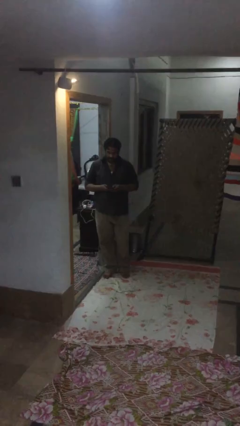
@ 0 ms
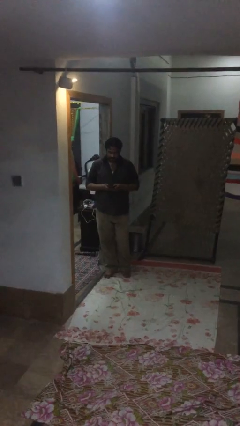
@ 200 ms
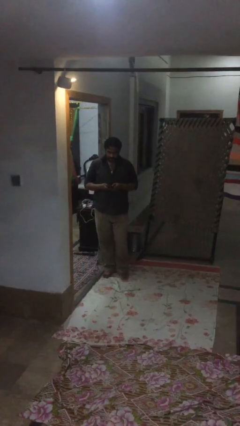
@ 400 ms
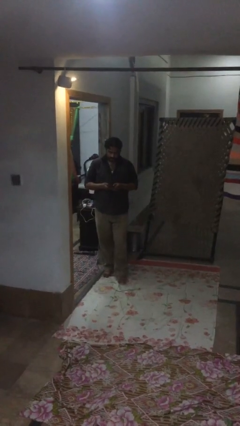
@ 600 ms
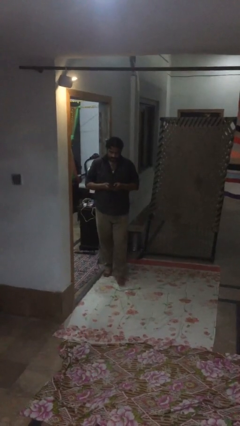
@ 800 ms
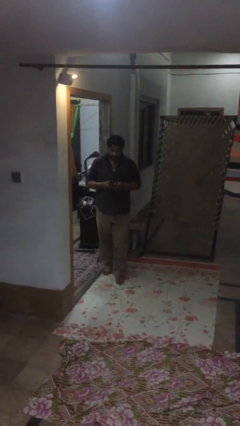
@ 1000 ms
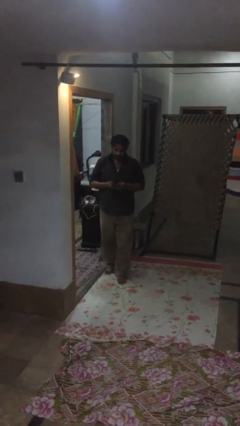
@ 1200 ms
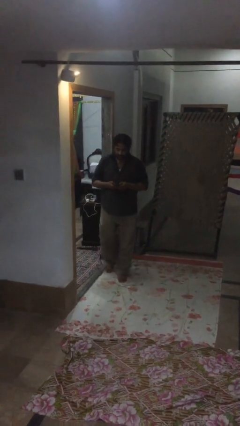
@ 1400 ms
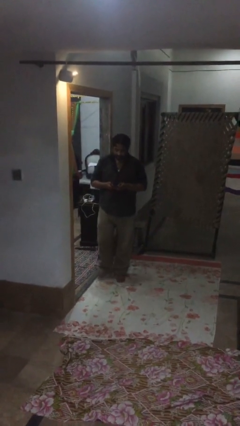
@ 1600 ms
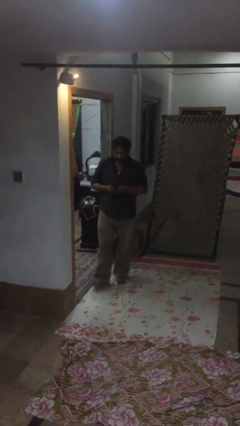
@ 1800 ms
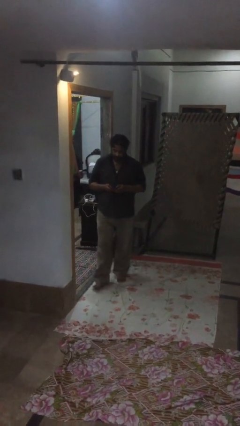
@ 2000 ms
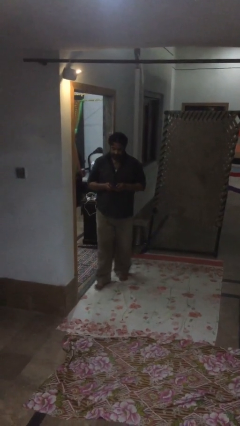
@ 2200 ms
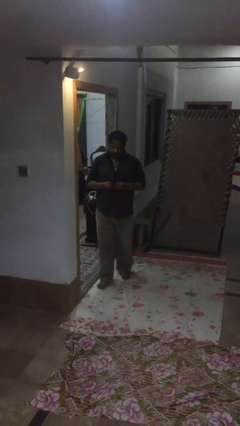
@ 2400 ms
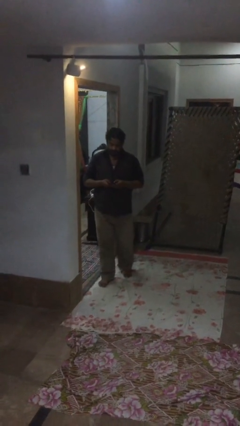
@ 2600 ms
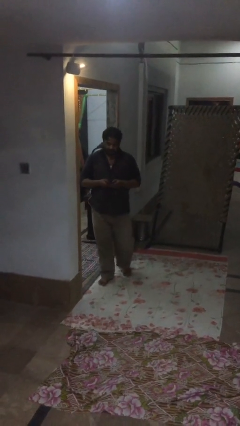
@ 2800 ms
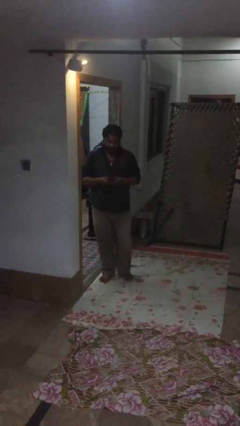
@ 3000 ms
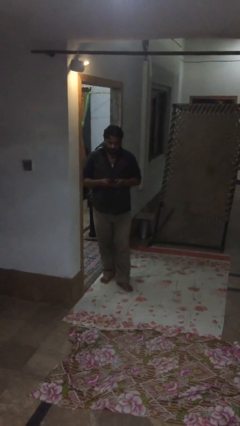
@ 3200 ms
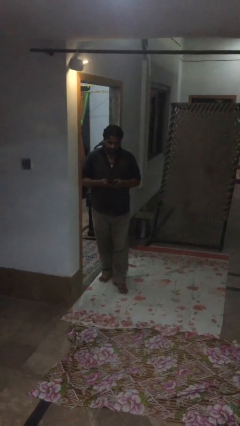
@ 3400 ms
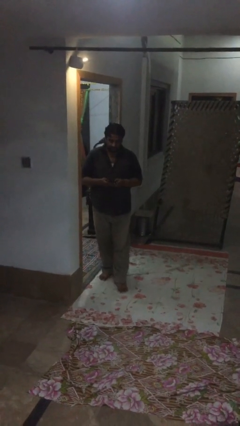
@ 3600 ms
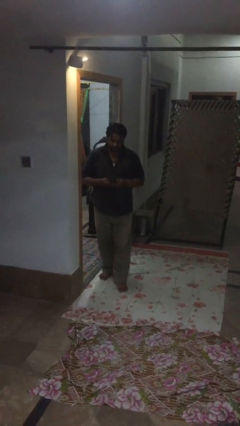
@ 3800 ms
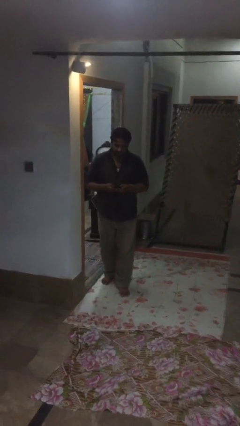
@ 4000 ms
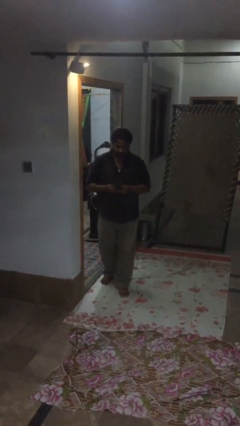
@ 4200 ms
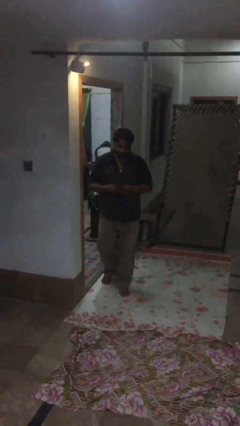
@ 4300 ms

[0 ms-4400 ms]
person texts on phone

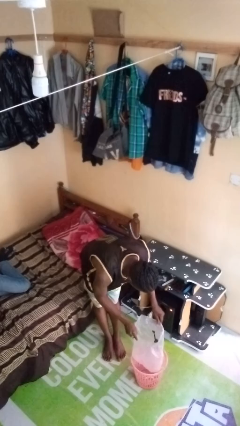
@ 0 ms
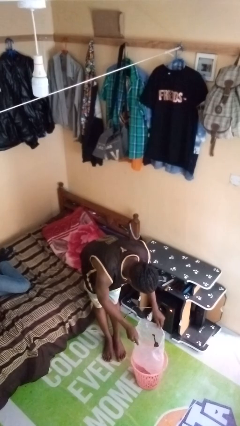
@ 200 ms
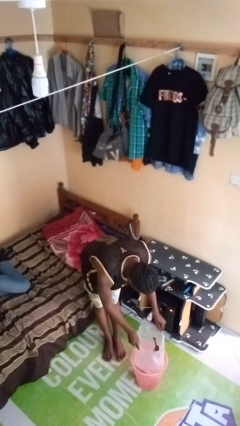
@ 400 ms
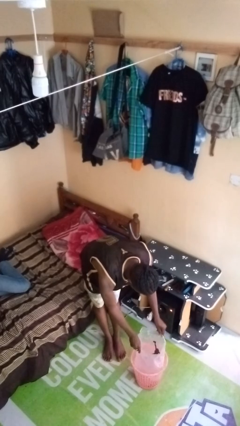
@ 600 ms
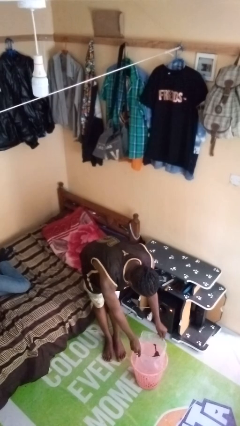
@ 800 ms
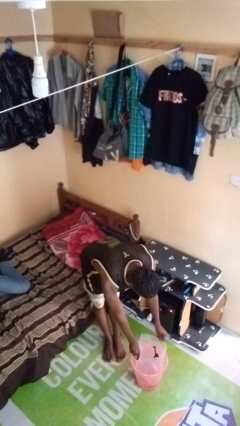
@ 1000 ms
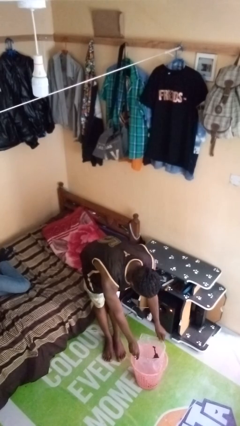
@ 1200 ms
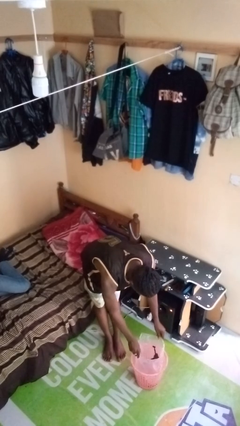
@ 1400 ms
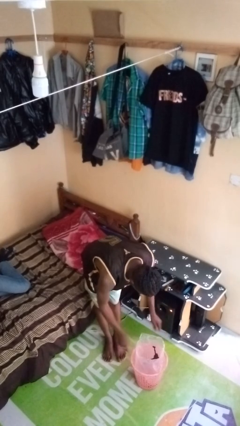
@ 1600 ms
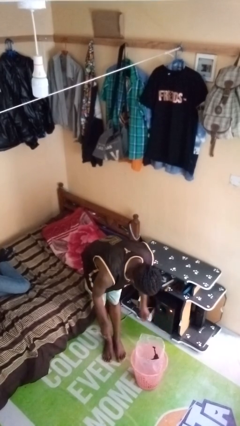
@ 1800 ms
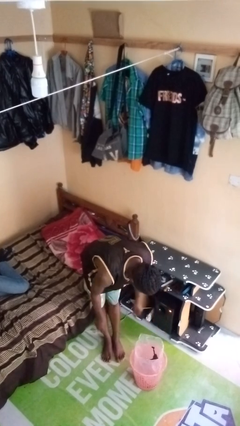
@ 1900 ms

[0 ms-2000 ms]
person inserts trashbag into trashcan

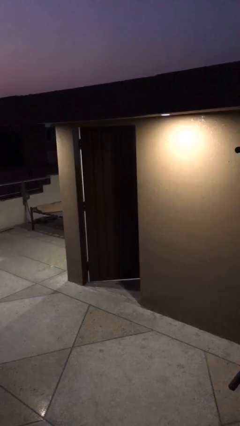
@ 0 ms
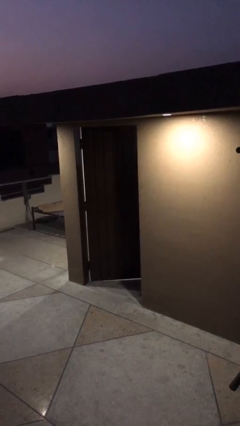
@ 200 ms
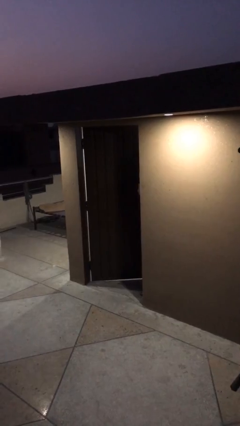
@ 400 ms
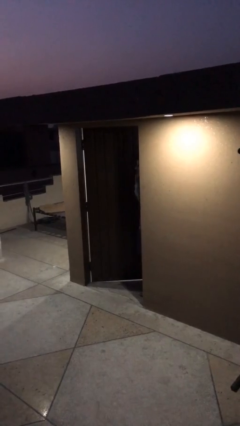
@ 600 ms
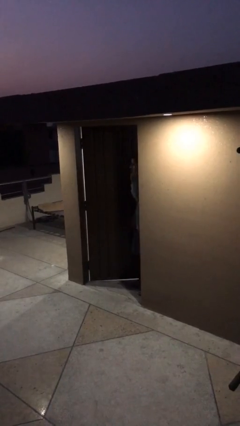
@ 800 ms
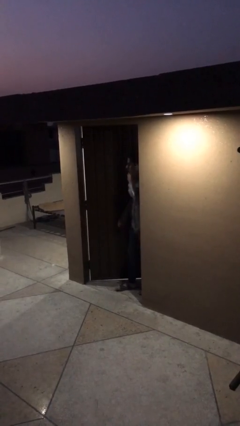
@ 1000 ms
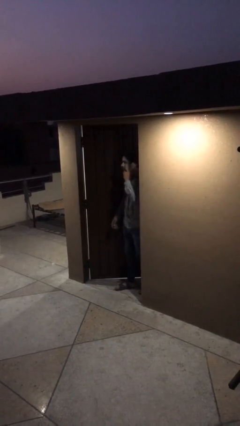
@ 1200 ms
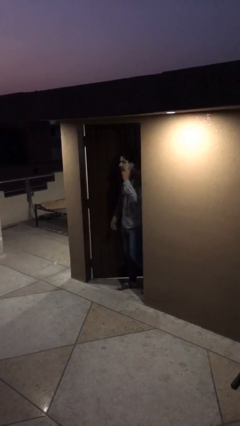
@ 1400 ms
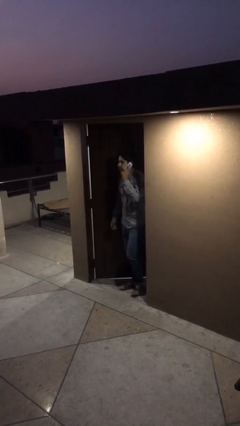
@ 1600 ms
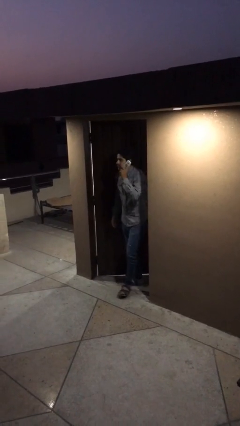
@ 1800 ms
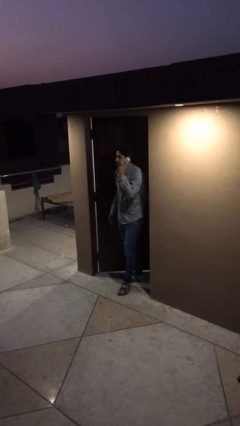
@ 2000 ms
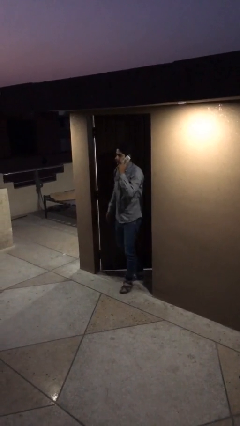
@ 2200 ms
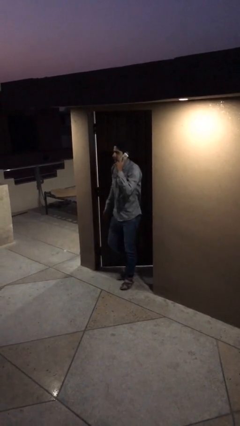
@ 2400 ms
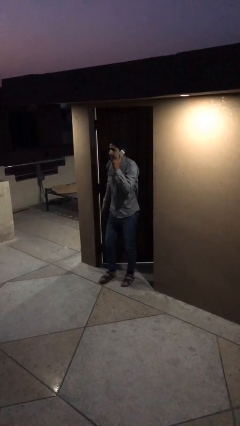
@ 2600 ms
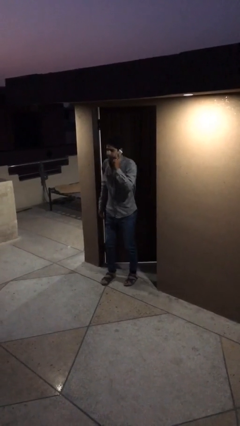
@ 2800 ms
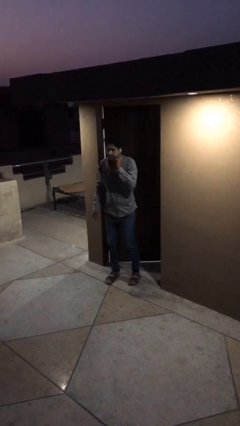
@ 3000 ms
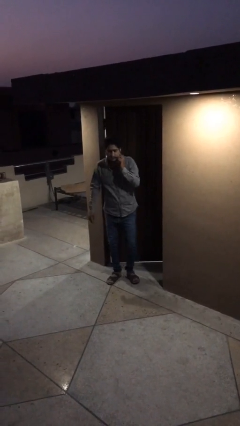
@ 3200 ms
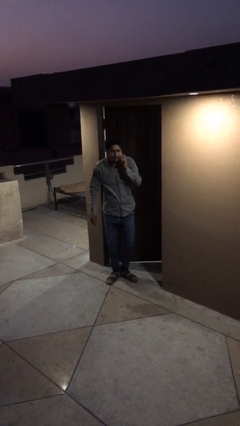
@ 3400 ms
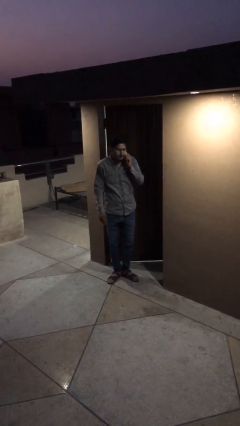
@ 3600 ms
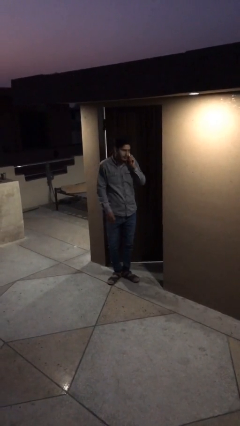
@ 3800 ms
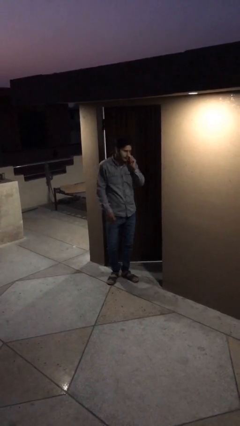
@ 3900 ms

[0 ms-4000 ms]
person enters scene through structure

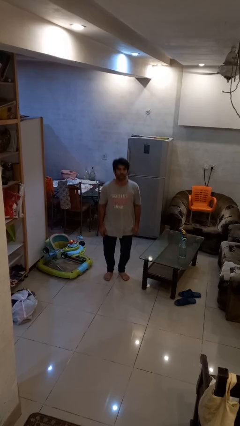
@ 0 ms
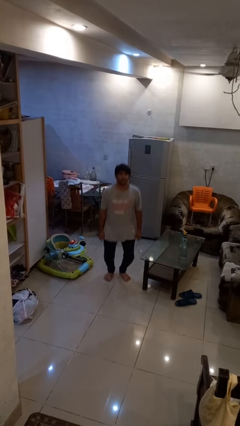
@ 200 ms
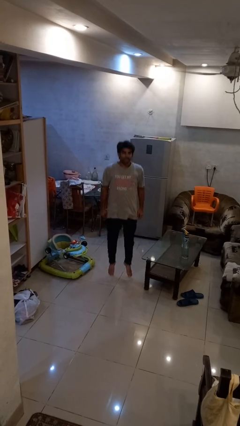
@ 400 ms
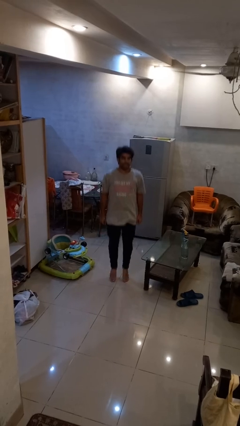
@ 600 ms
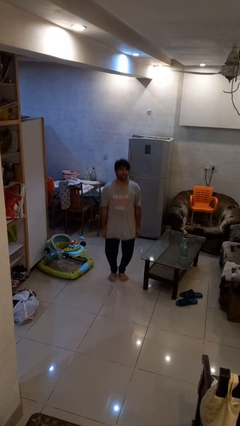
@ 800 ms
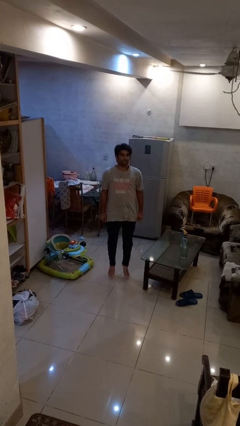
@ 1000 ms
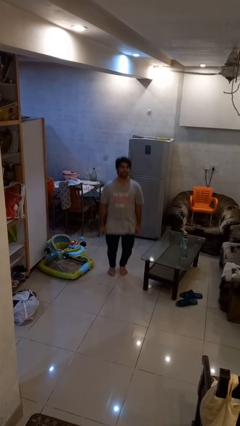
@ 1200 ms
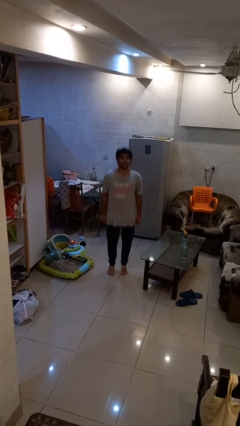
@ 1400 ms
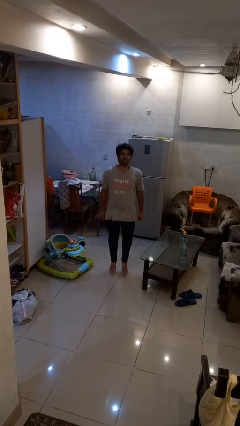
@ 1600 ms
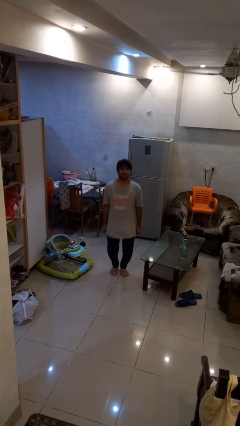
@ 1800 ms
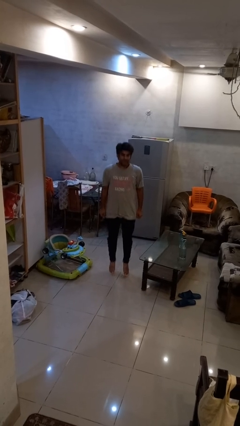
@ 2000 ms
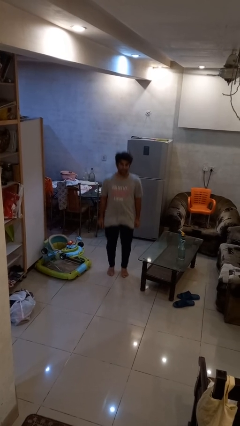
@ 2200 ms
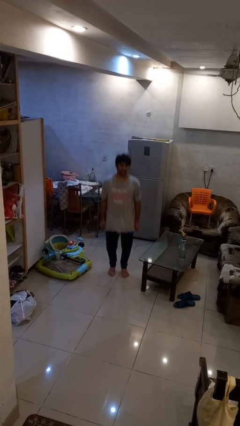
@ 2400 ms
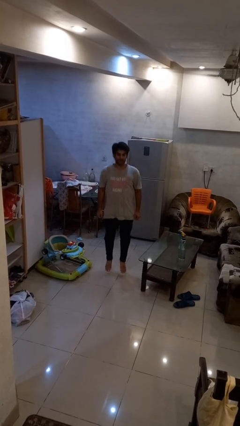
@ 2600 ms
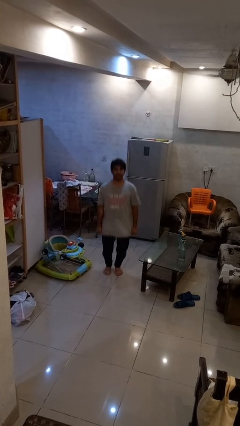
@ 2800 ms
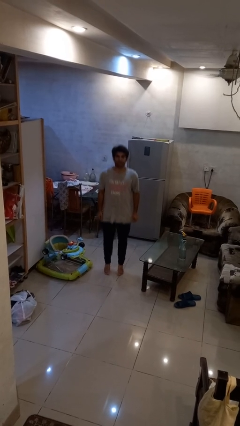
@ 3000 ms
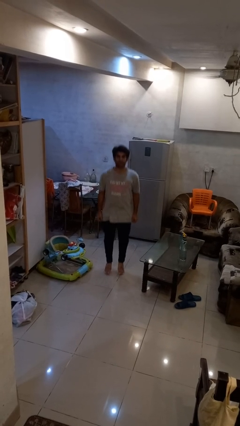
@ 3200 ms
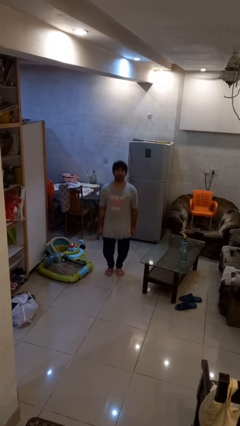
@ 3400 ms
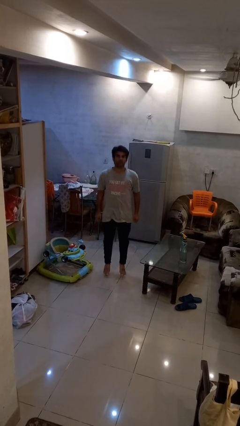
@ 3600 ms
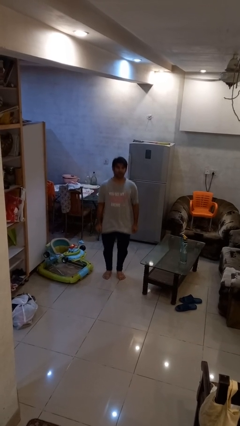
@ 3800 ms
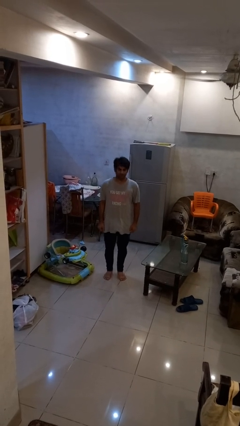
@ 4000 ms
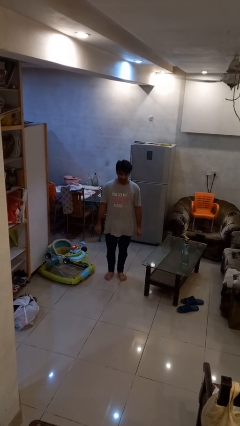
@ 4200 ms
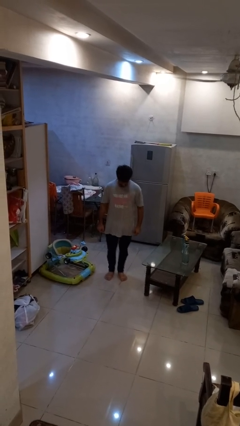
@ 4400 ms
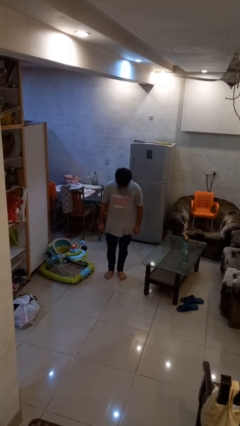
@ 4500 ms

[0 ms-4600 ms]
person jumps

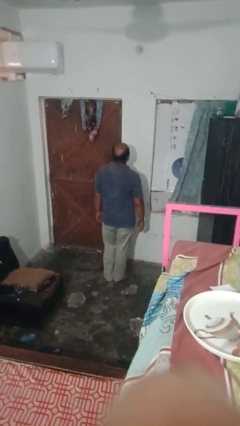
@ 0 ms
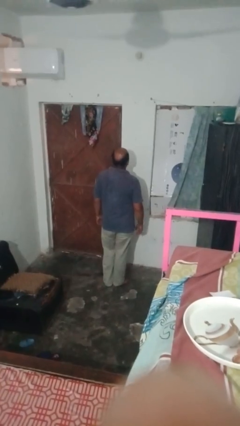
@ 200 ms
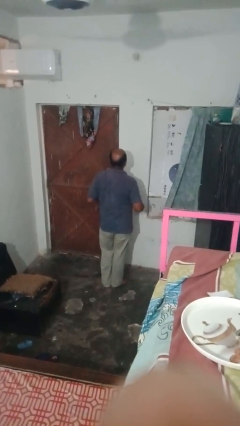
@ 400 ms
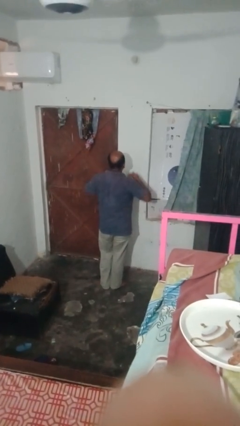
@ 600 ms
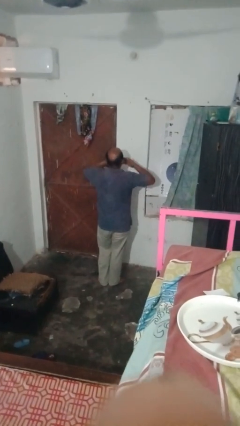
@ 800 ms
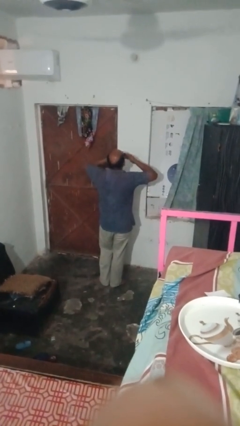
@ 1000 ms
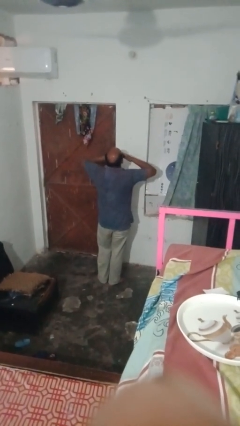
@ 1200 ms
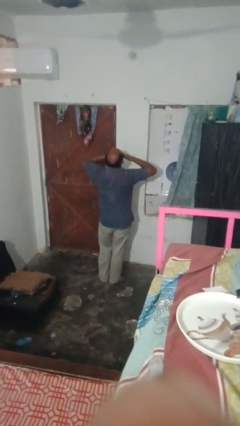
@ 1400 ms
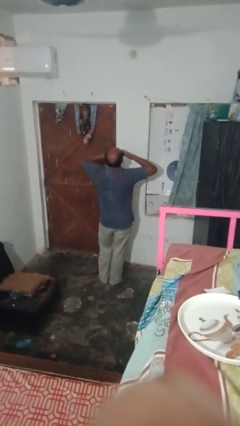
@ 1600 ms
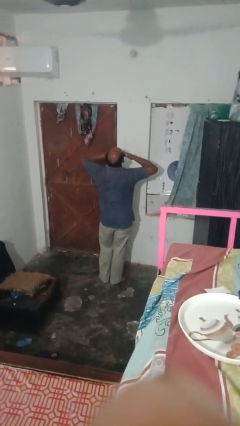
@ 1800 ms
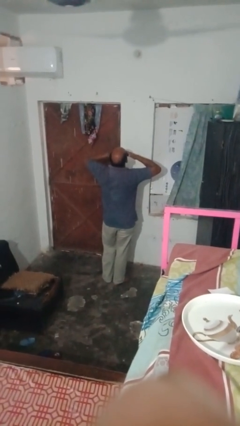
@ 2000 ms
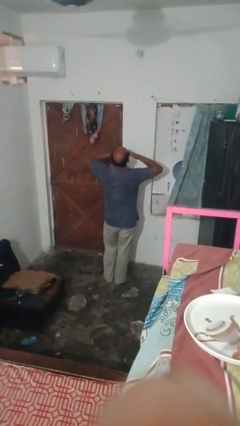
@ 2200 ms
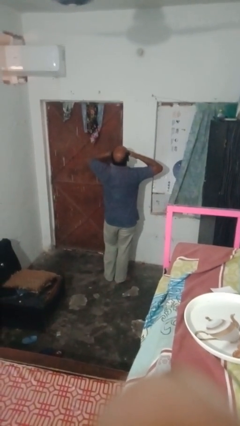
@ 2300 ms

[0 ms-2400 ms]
person yawns

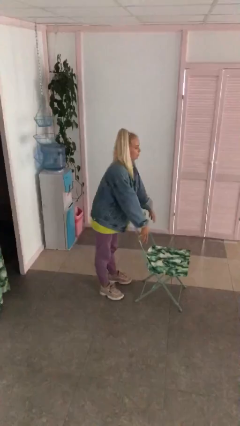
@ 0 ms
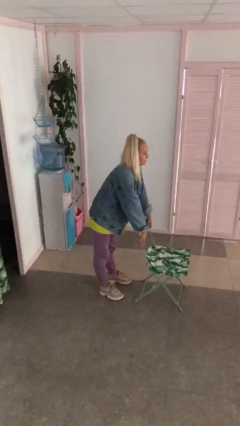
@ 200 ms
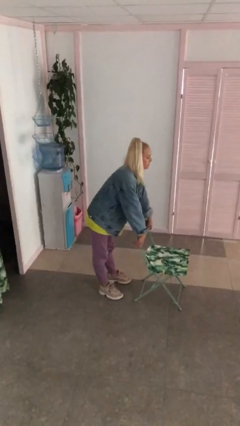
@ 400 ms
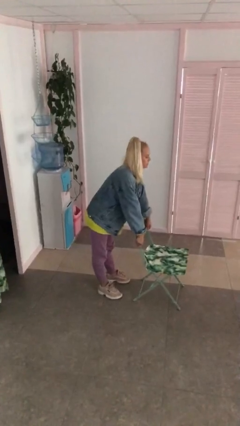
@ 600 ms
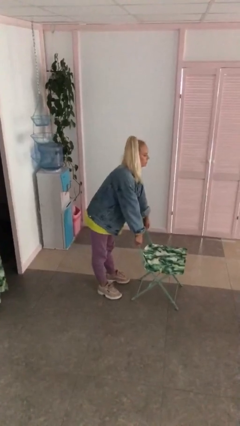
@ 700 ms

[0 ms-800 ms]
person picks up object from floor
